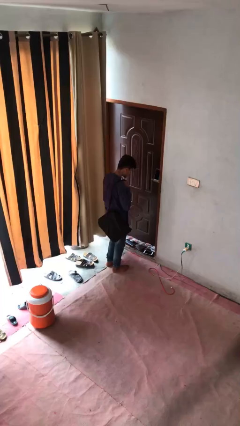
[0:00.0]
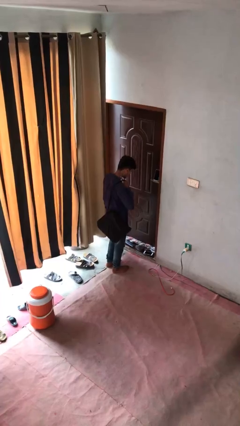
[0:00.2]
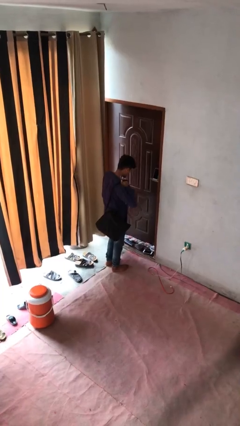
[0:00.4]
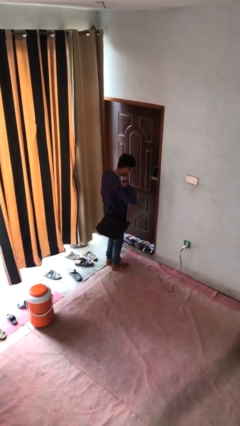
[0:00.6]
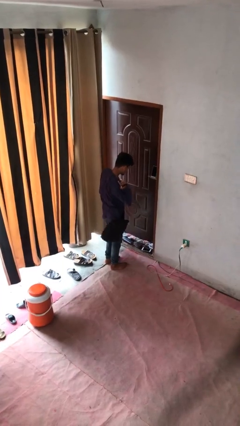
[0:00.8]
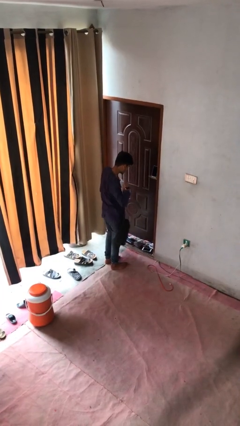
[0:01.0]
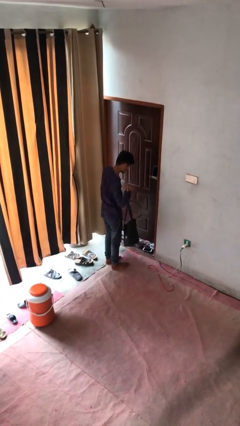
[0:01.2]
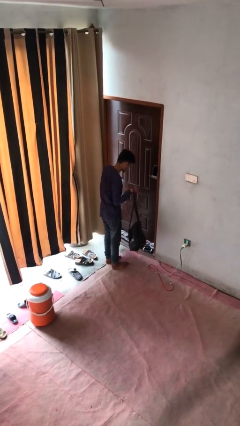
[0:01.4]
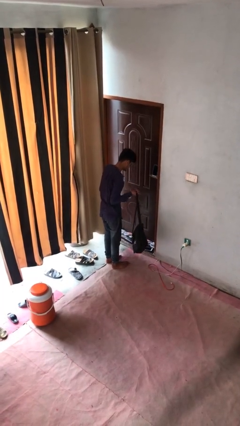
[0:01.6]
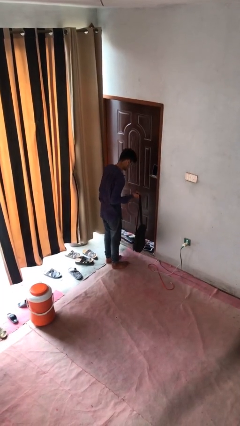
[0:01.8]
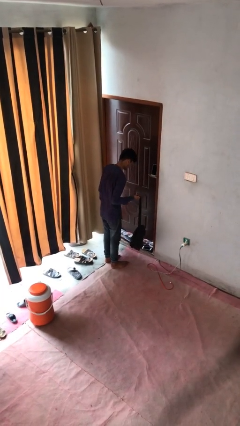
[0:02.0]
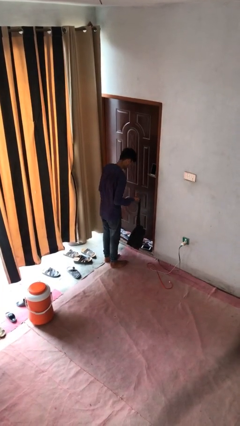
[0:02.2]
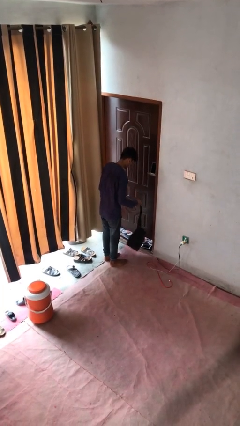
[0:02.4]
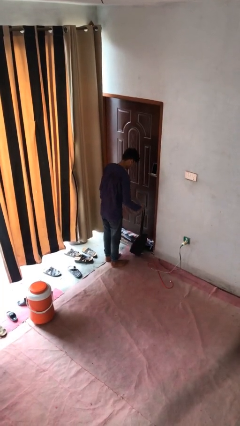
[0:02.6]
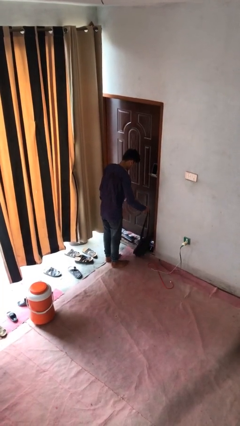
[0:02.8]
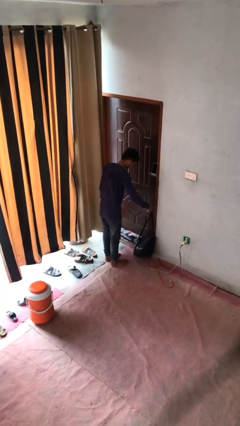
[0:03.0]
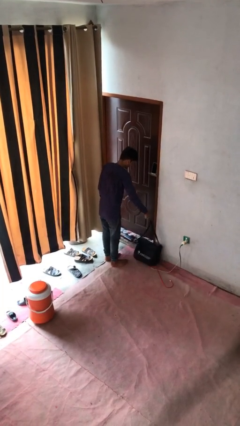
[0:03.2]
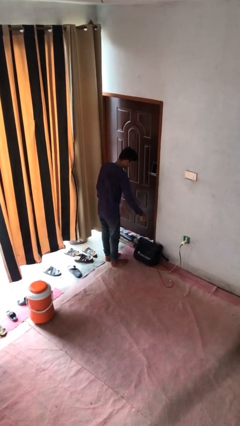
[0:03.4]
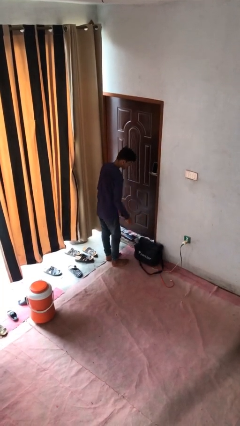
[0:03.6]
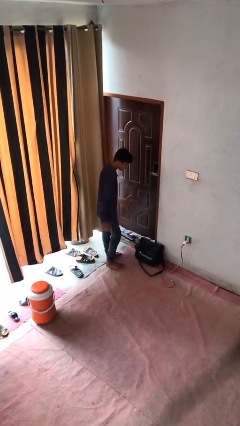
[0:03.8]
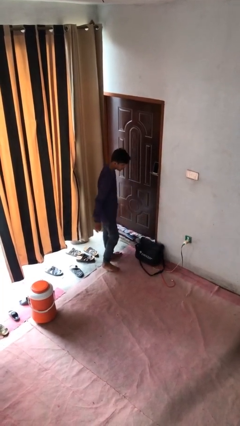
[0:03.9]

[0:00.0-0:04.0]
person puts down object on floor

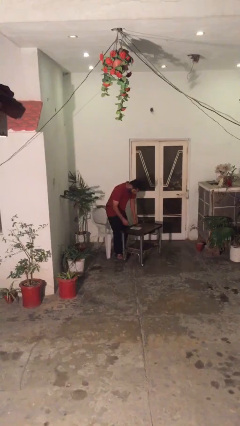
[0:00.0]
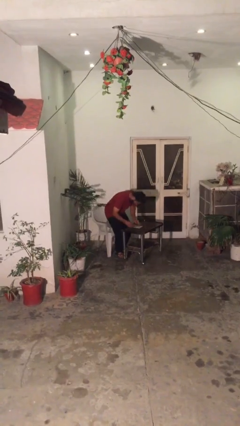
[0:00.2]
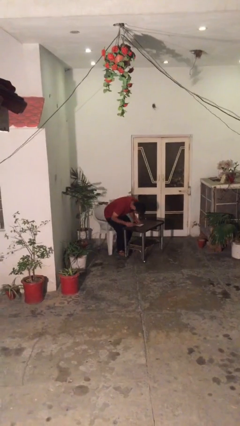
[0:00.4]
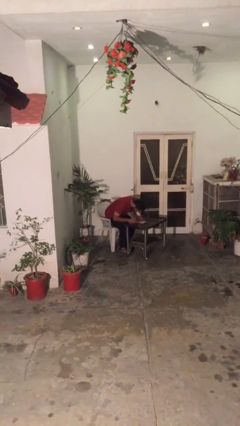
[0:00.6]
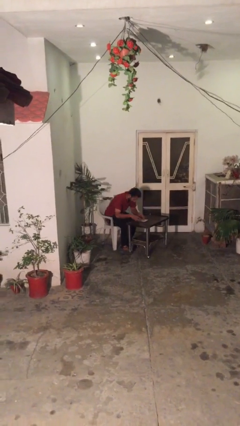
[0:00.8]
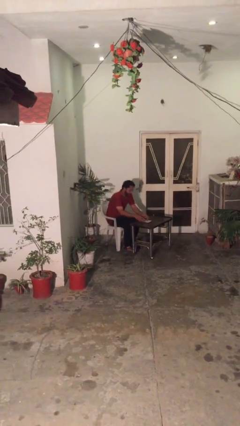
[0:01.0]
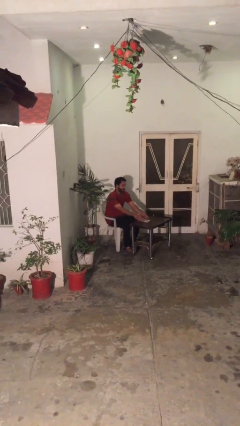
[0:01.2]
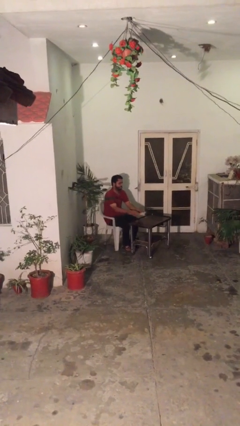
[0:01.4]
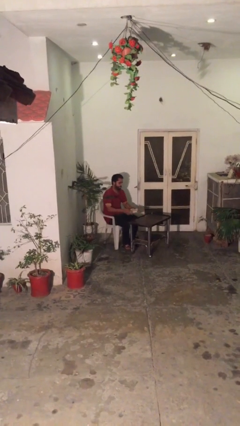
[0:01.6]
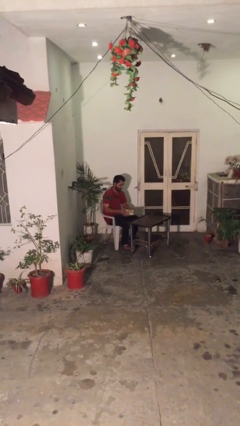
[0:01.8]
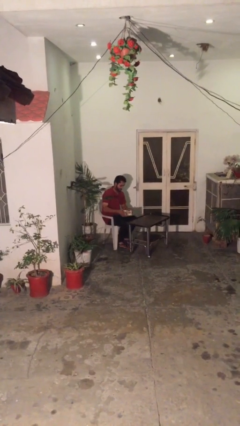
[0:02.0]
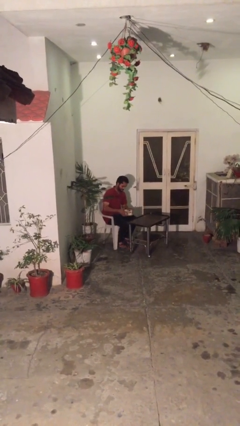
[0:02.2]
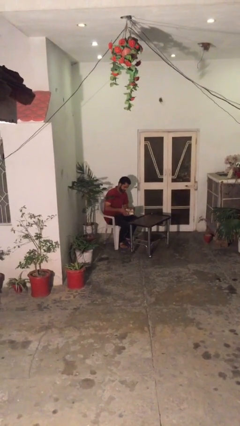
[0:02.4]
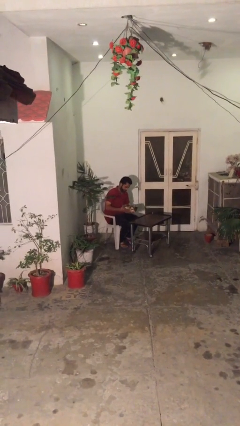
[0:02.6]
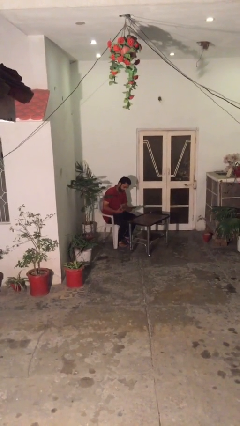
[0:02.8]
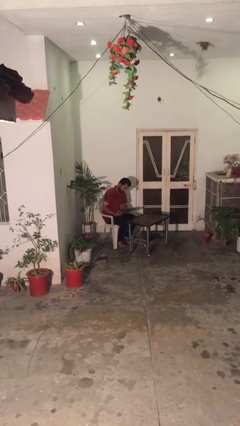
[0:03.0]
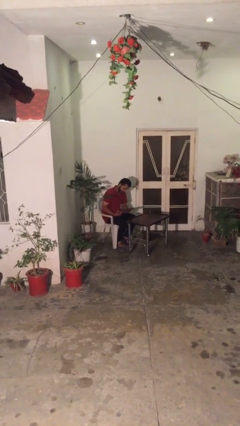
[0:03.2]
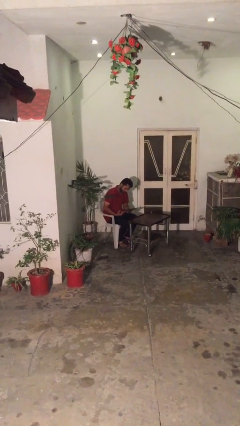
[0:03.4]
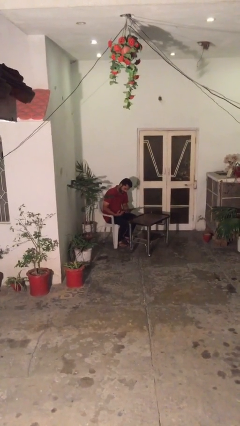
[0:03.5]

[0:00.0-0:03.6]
person sits down

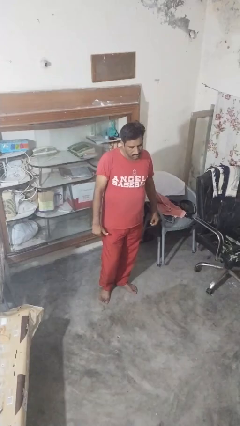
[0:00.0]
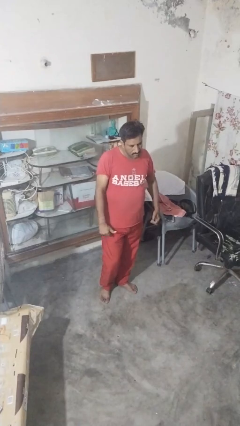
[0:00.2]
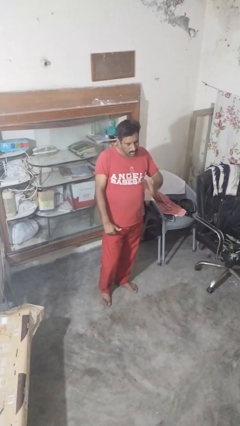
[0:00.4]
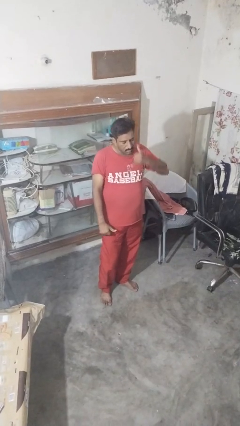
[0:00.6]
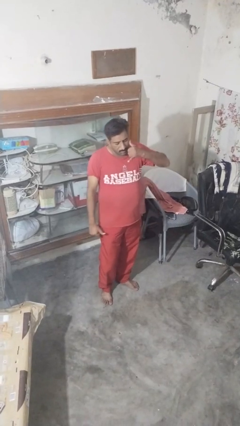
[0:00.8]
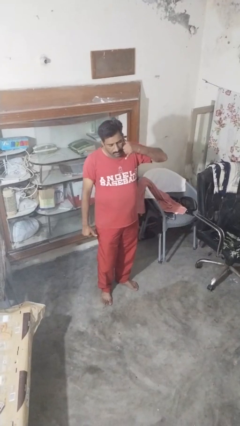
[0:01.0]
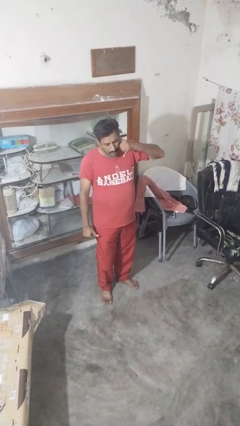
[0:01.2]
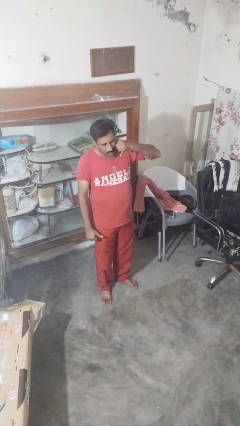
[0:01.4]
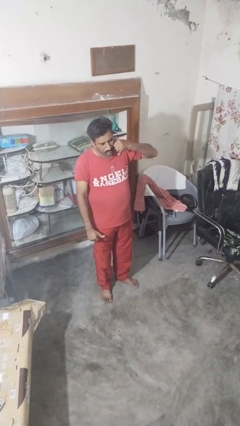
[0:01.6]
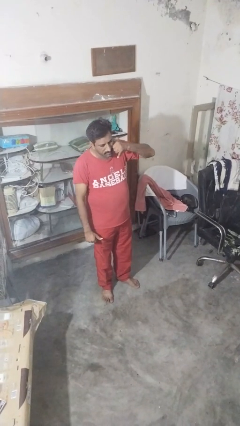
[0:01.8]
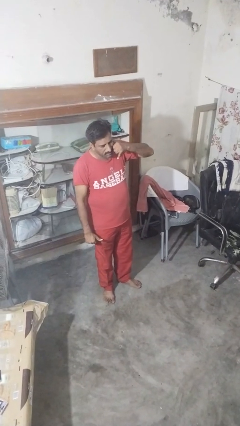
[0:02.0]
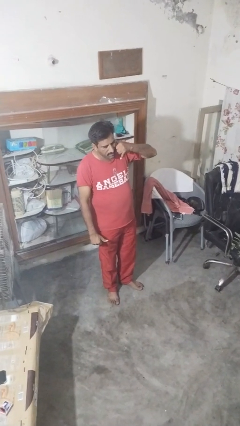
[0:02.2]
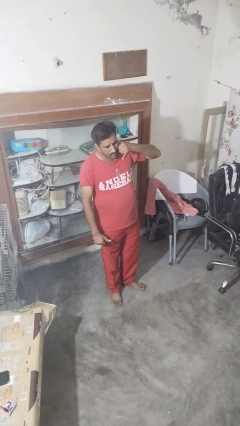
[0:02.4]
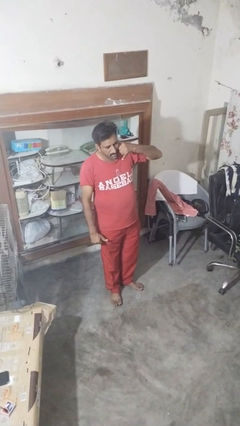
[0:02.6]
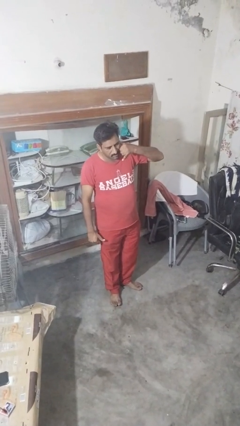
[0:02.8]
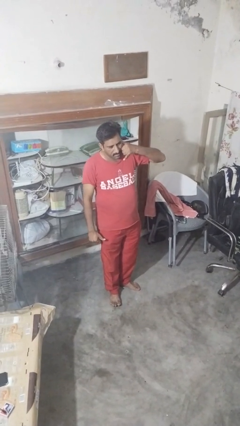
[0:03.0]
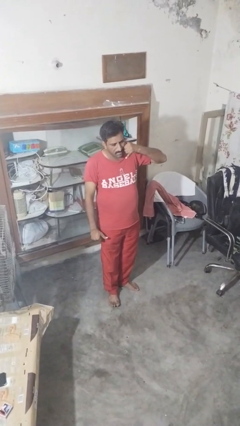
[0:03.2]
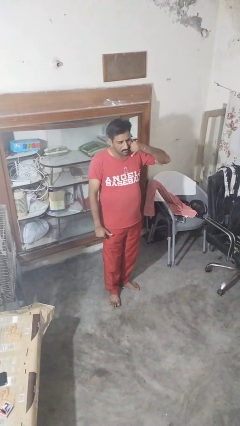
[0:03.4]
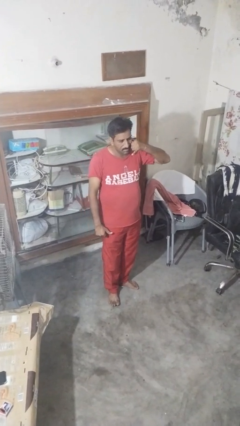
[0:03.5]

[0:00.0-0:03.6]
person gestures call me

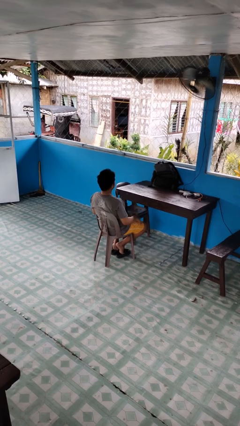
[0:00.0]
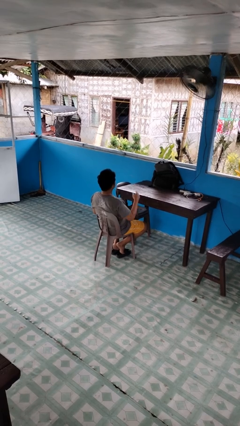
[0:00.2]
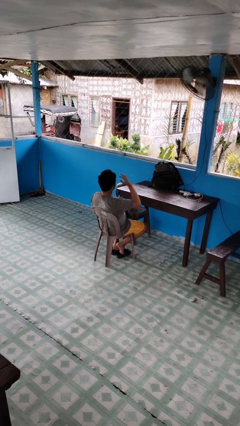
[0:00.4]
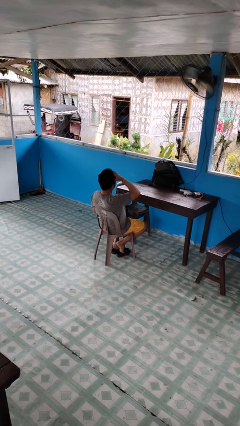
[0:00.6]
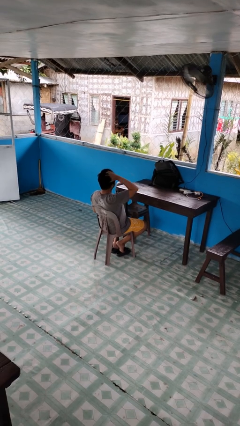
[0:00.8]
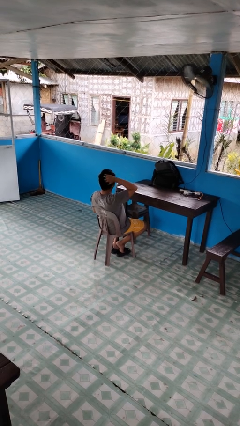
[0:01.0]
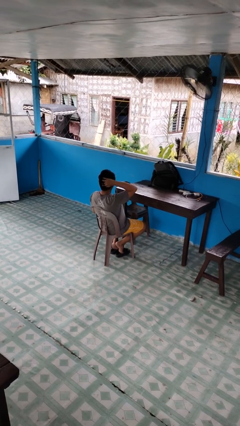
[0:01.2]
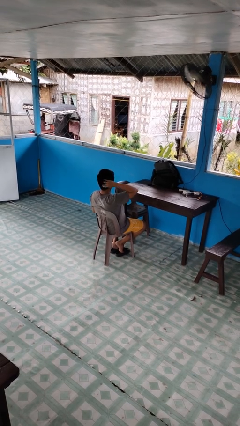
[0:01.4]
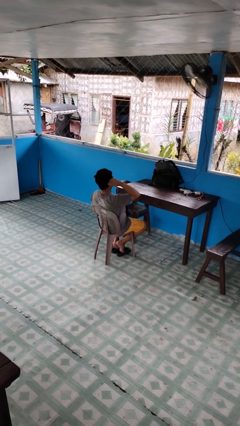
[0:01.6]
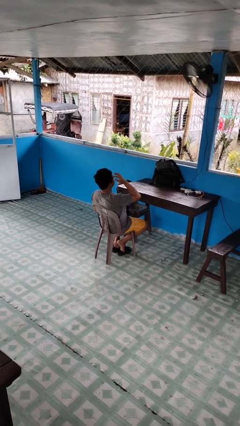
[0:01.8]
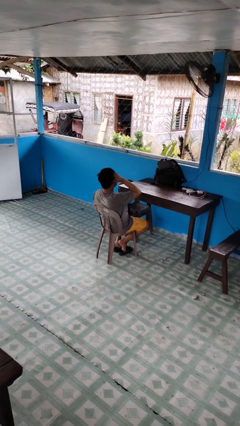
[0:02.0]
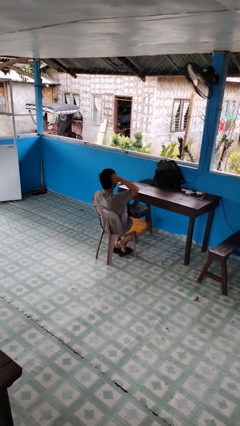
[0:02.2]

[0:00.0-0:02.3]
person strokes hair

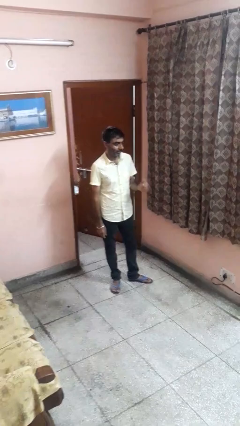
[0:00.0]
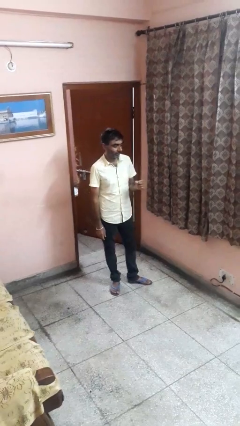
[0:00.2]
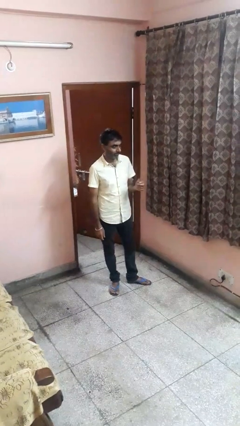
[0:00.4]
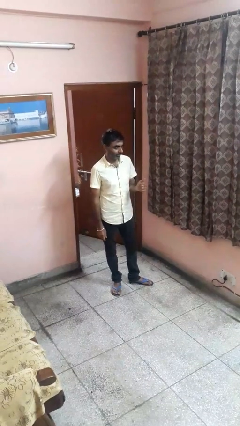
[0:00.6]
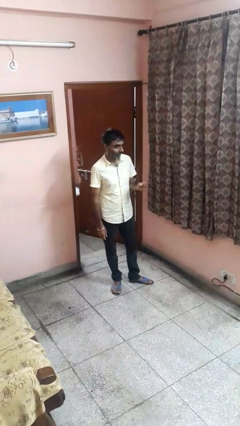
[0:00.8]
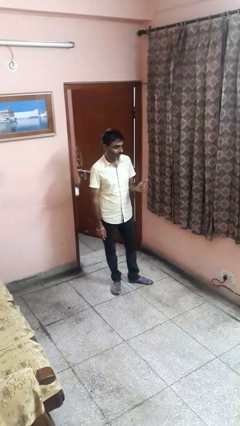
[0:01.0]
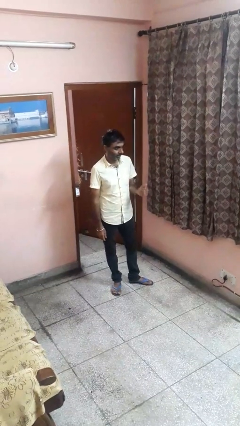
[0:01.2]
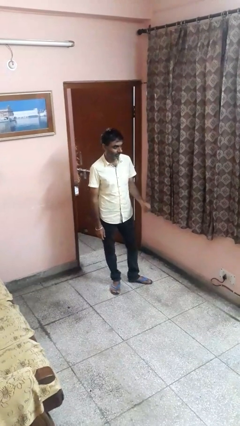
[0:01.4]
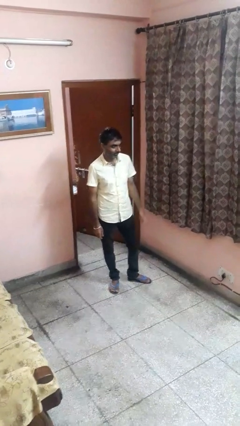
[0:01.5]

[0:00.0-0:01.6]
person snaps fingers

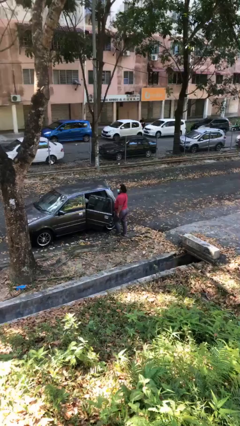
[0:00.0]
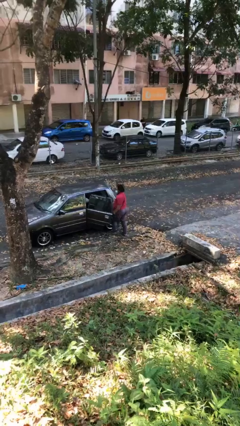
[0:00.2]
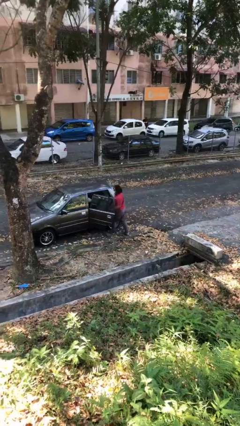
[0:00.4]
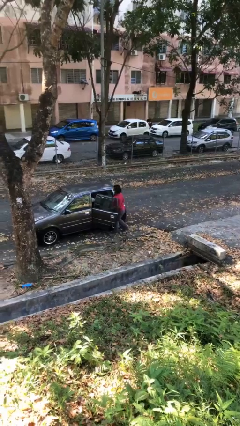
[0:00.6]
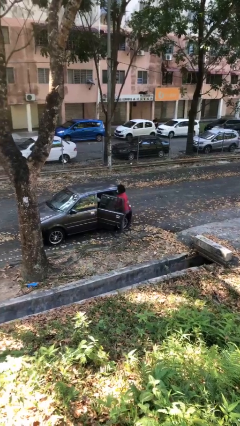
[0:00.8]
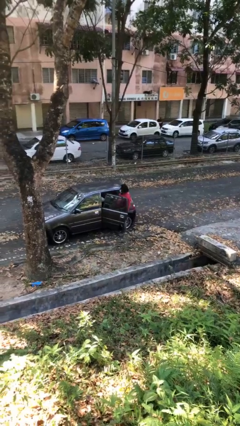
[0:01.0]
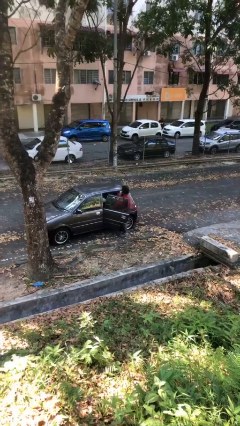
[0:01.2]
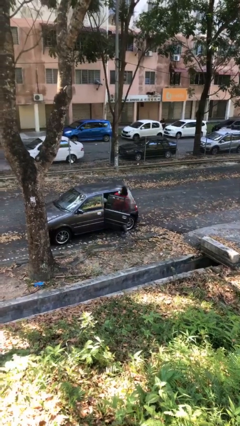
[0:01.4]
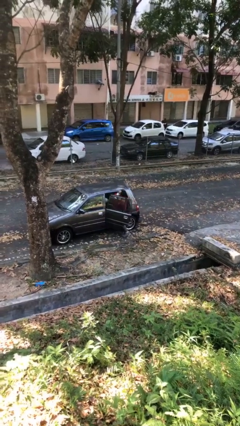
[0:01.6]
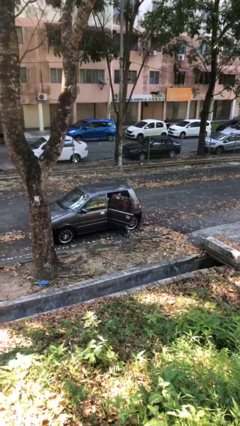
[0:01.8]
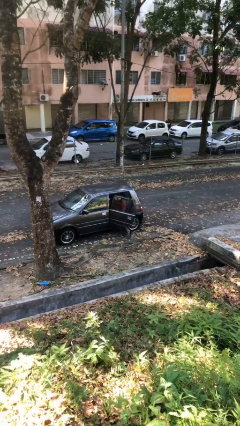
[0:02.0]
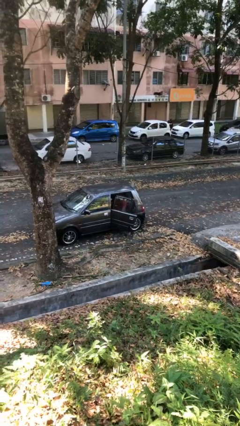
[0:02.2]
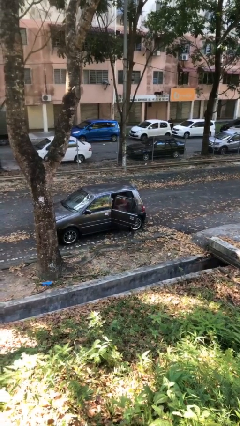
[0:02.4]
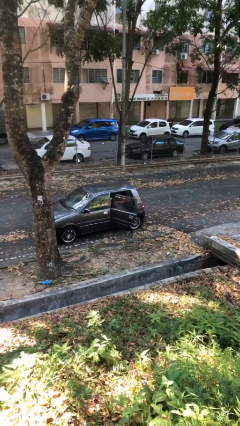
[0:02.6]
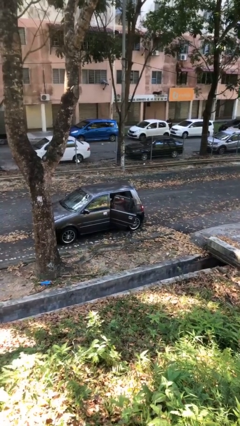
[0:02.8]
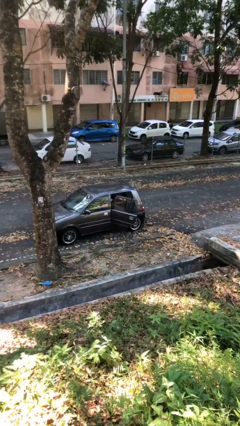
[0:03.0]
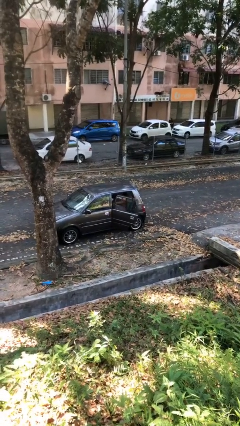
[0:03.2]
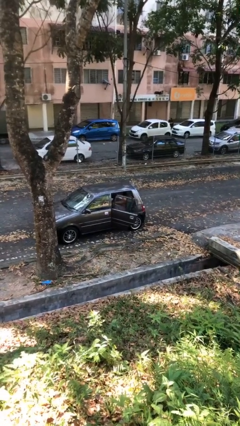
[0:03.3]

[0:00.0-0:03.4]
person enters car
